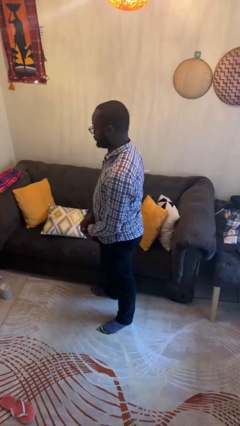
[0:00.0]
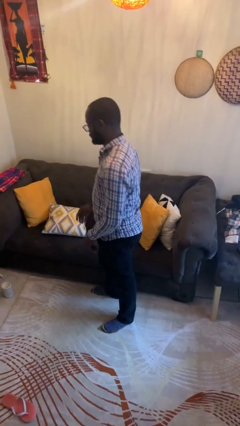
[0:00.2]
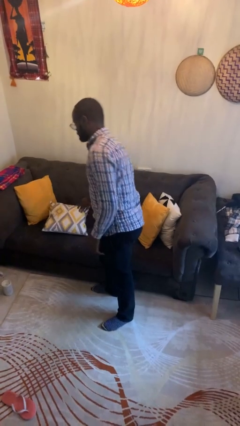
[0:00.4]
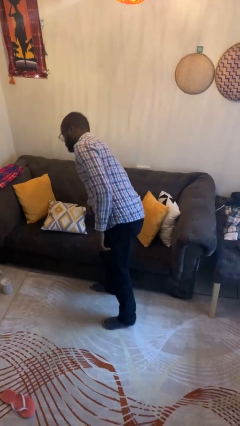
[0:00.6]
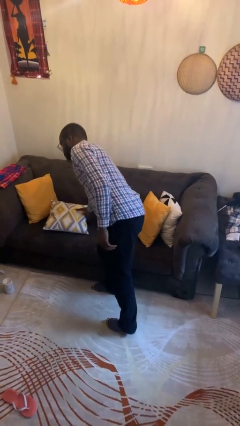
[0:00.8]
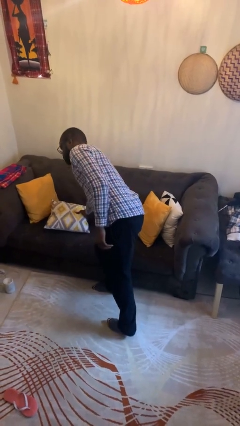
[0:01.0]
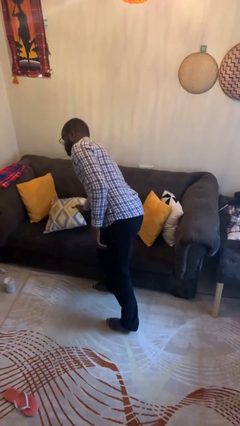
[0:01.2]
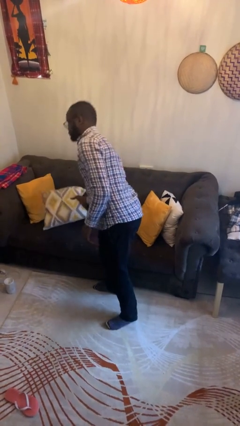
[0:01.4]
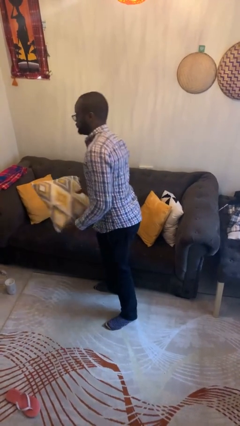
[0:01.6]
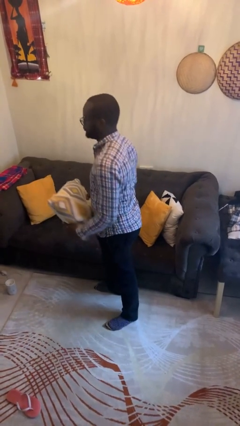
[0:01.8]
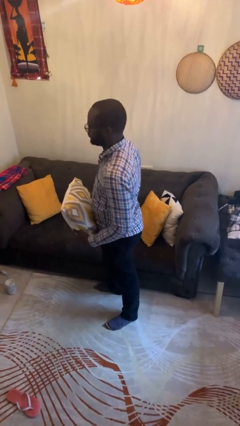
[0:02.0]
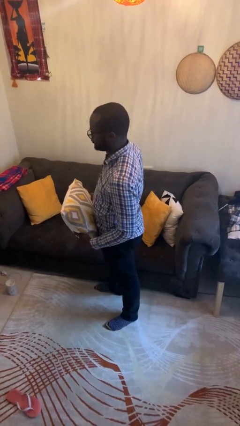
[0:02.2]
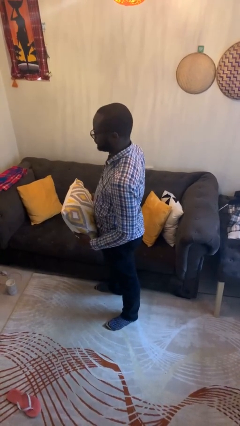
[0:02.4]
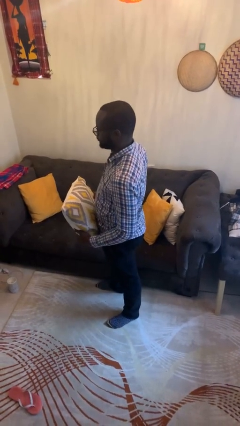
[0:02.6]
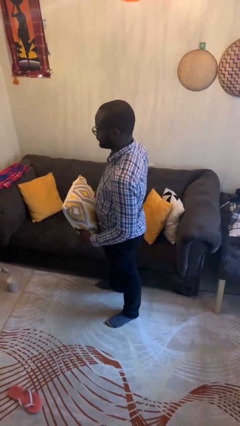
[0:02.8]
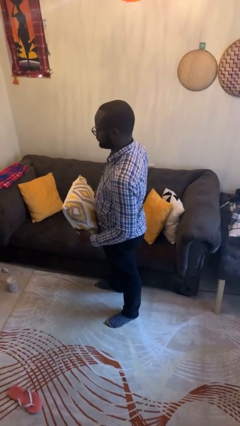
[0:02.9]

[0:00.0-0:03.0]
person picks up object from couch

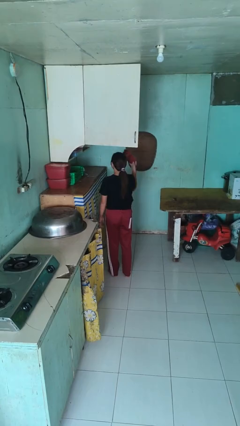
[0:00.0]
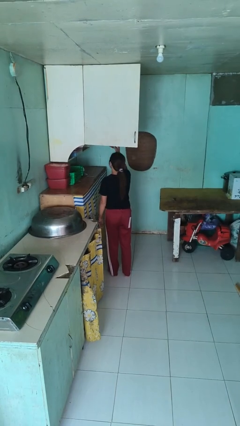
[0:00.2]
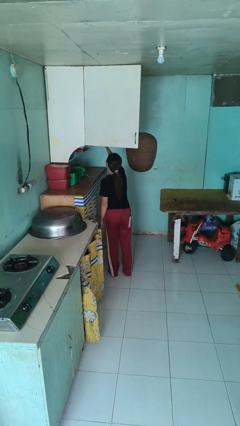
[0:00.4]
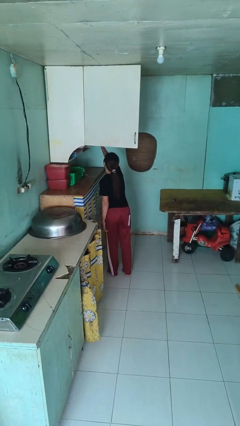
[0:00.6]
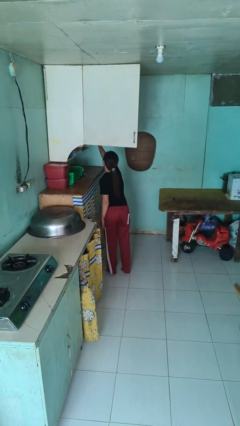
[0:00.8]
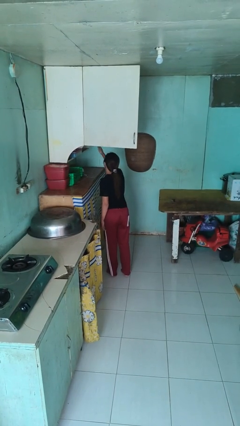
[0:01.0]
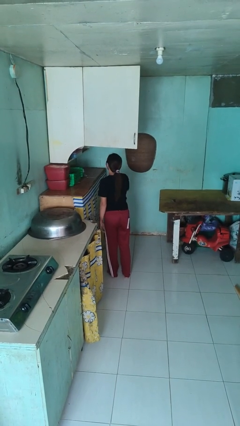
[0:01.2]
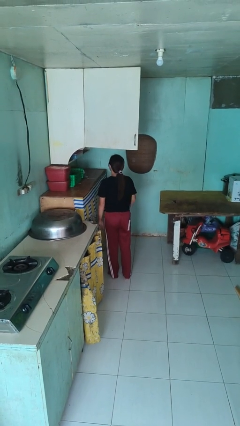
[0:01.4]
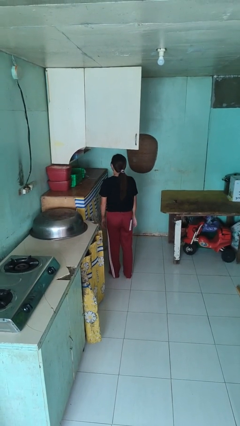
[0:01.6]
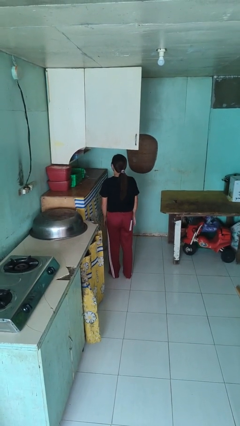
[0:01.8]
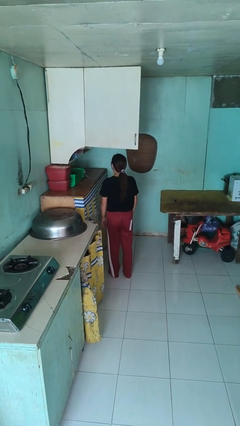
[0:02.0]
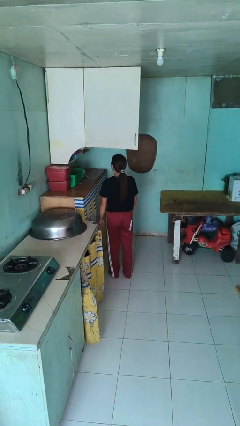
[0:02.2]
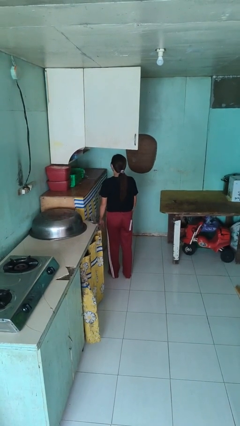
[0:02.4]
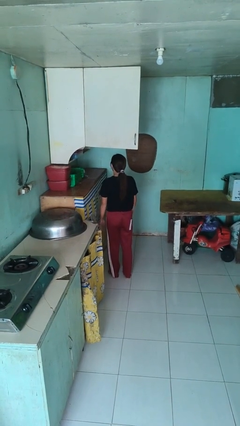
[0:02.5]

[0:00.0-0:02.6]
person puts object in cabinet

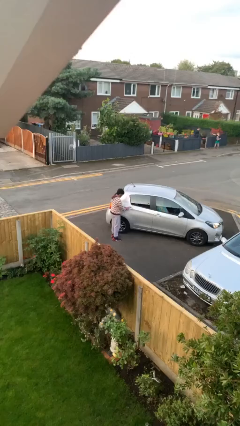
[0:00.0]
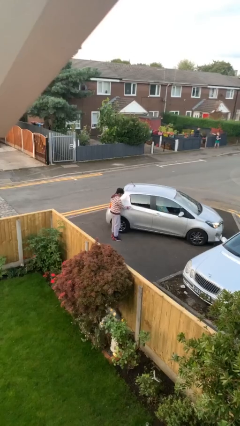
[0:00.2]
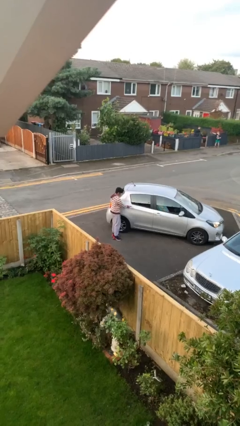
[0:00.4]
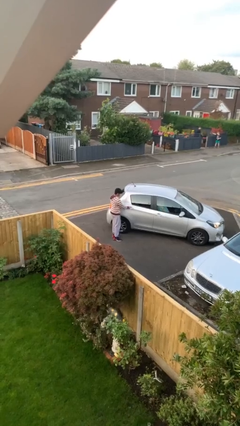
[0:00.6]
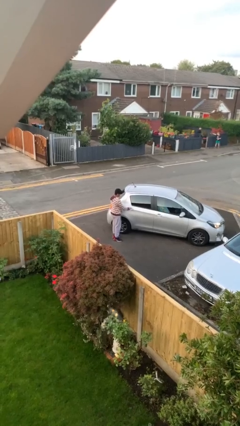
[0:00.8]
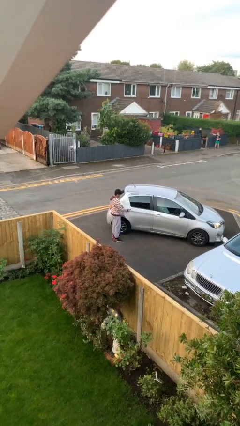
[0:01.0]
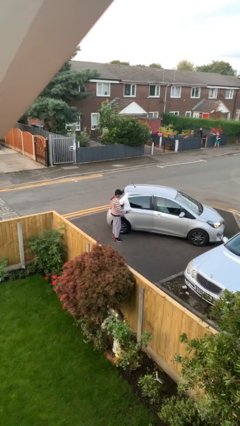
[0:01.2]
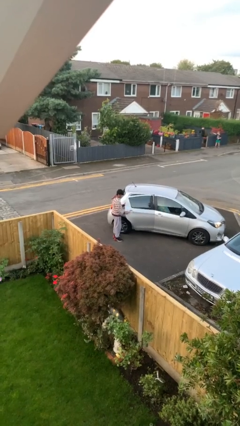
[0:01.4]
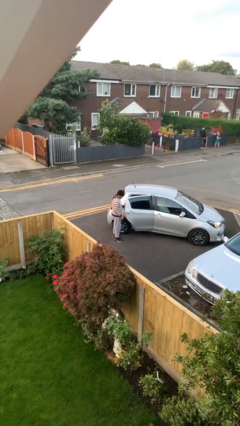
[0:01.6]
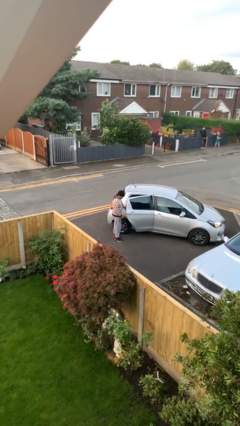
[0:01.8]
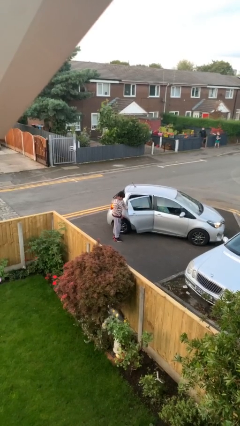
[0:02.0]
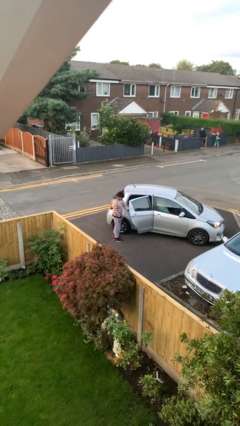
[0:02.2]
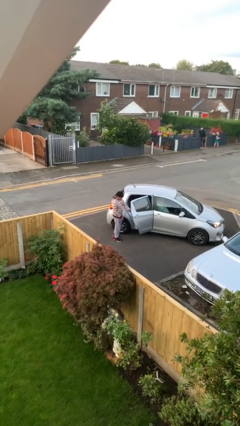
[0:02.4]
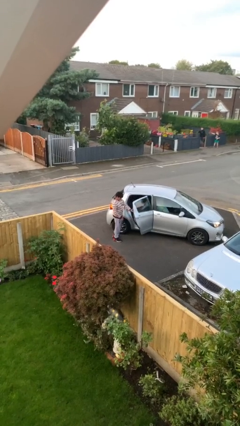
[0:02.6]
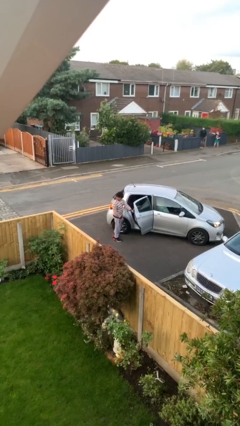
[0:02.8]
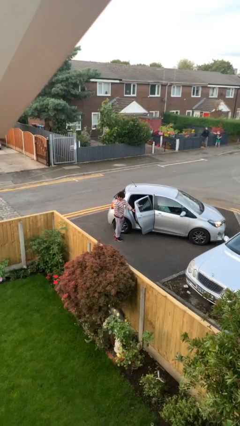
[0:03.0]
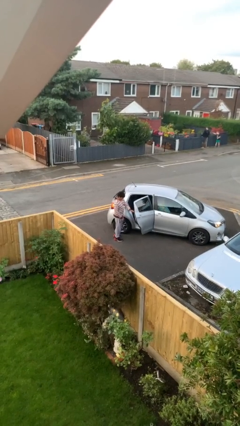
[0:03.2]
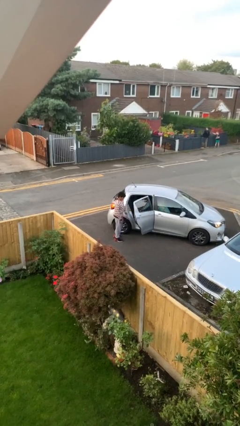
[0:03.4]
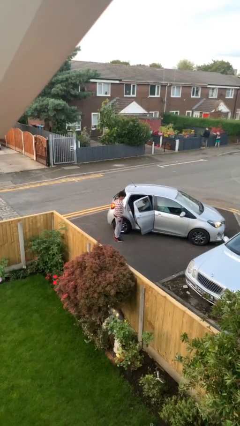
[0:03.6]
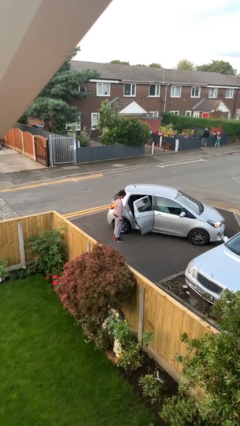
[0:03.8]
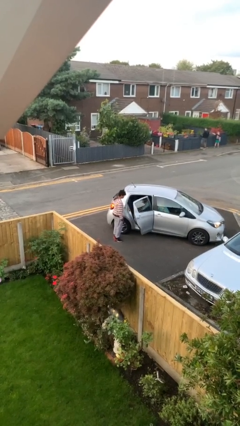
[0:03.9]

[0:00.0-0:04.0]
person opens car door

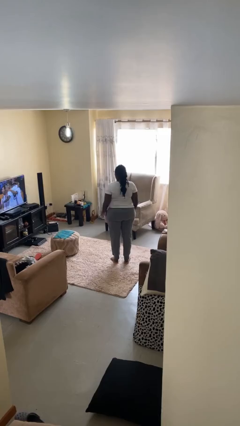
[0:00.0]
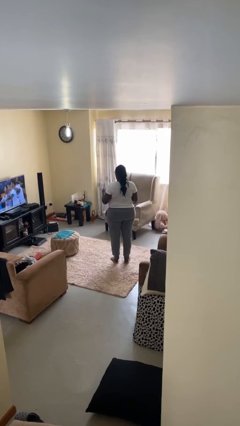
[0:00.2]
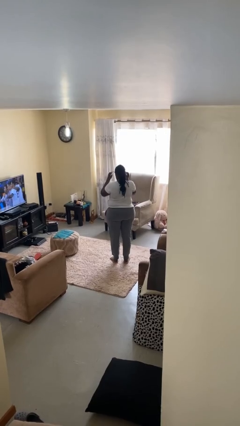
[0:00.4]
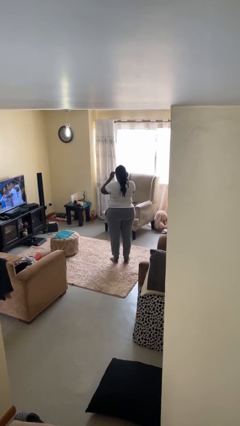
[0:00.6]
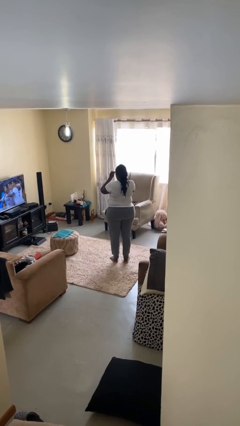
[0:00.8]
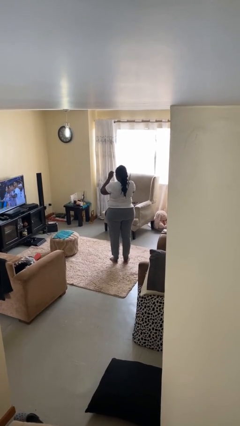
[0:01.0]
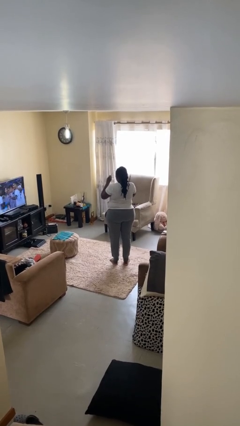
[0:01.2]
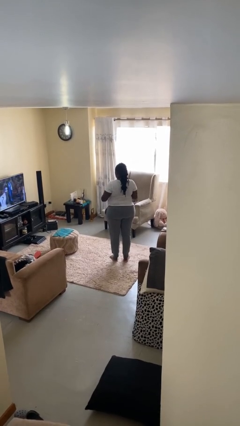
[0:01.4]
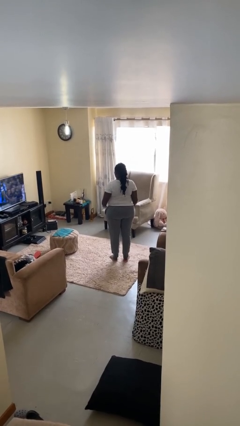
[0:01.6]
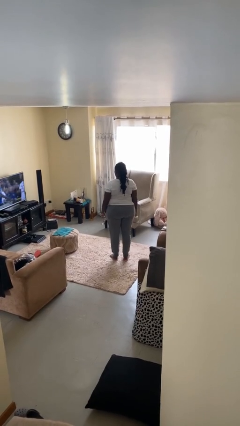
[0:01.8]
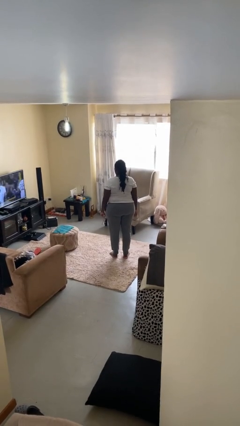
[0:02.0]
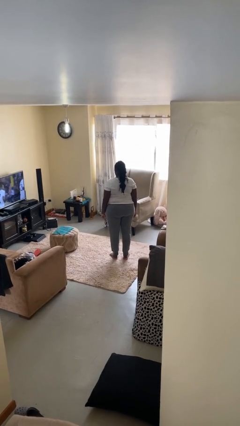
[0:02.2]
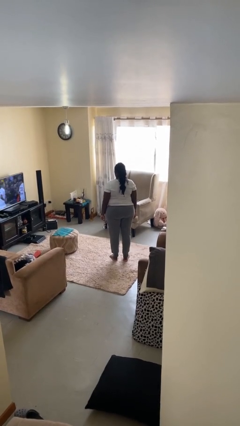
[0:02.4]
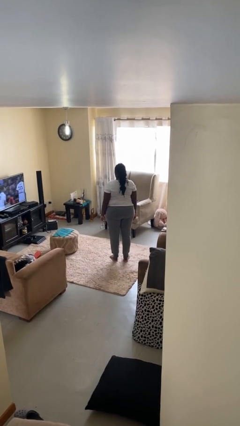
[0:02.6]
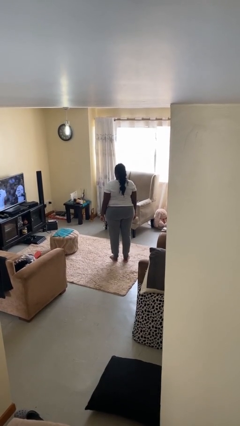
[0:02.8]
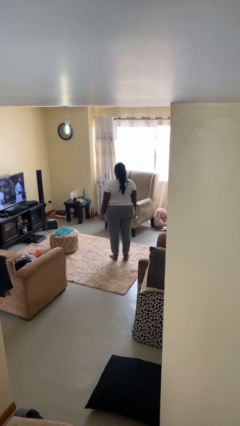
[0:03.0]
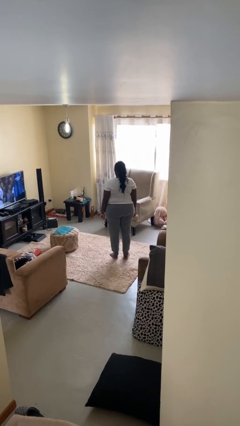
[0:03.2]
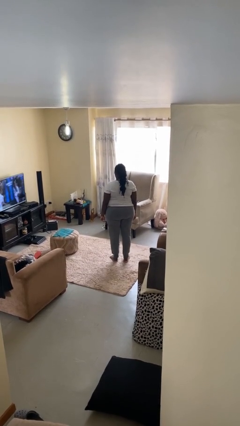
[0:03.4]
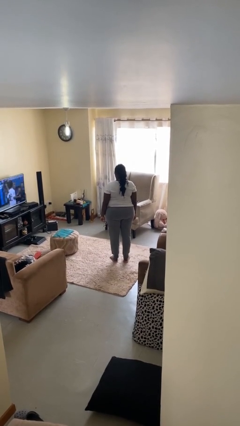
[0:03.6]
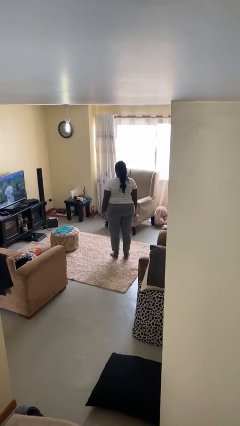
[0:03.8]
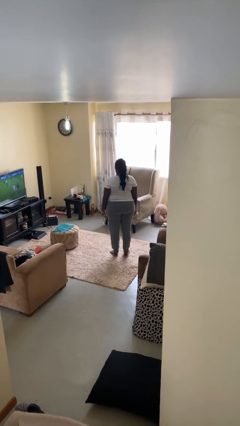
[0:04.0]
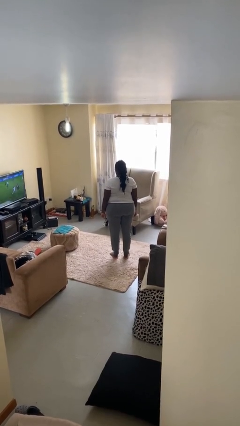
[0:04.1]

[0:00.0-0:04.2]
person takes off glasses

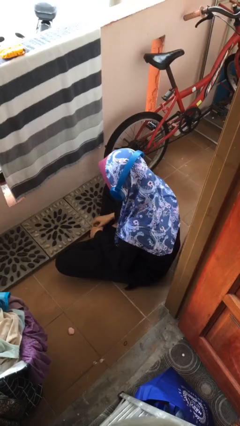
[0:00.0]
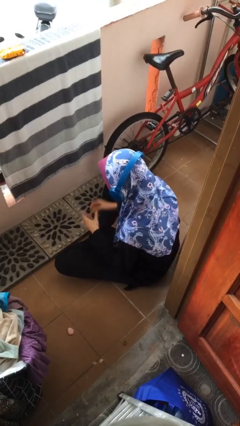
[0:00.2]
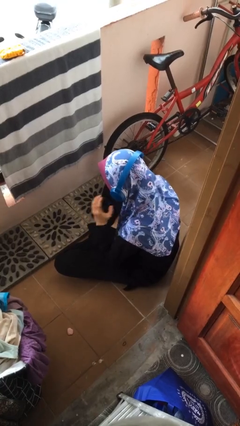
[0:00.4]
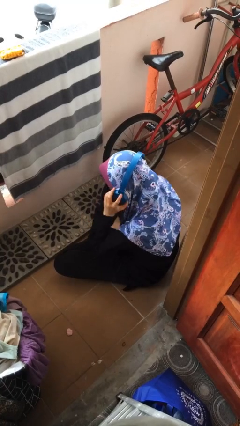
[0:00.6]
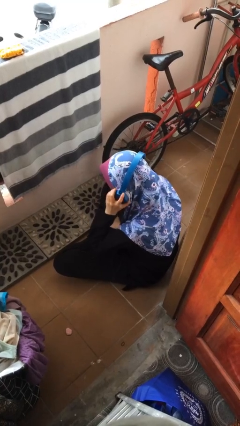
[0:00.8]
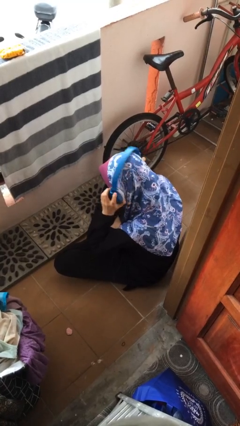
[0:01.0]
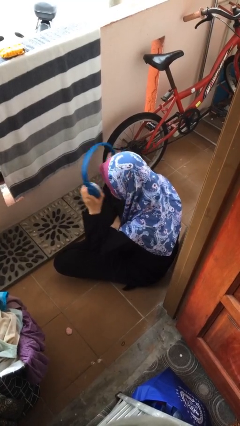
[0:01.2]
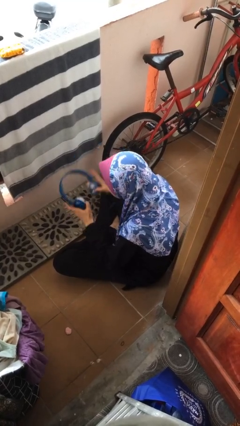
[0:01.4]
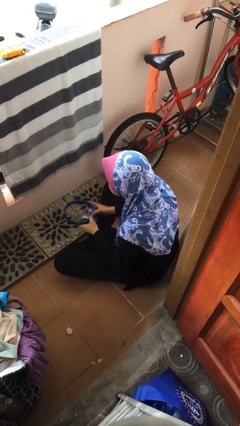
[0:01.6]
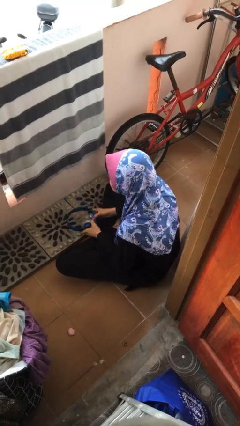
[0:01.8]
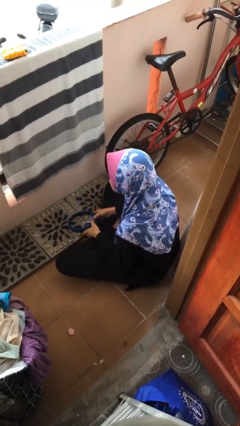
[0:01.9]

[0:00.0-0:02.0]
person takes off headphones

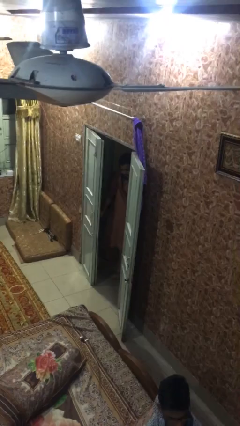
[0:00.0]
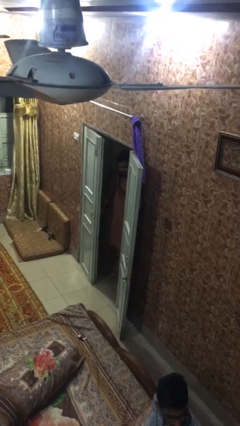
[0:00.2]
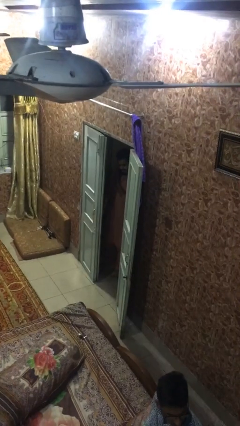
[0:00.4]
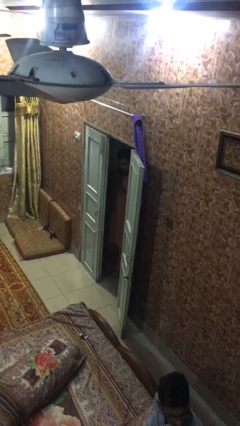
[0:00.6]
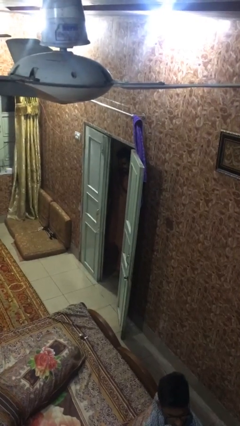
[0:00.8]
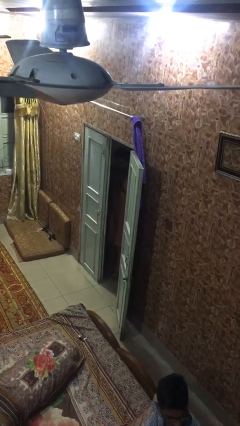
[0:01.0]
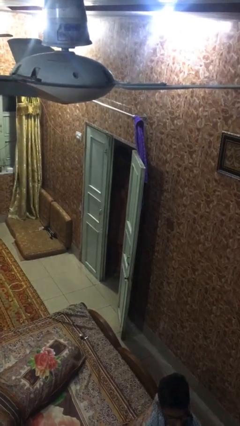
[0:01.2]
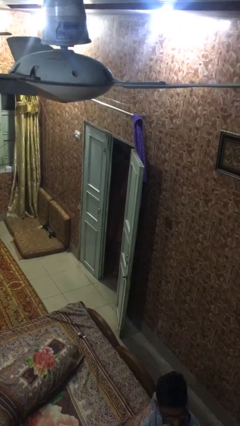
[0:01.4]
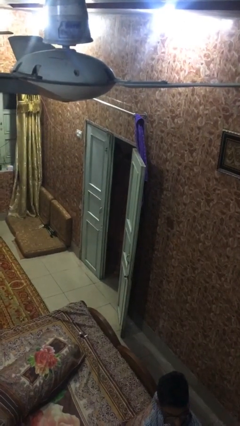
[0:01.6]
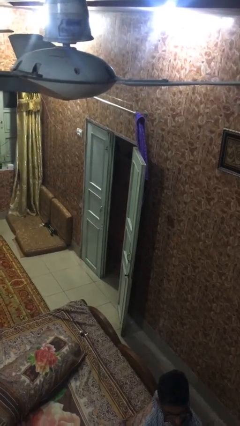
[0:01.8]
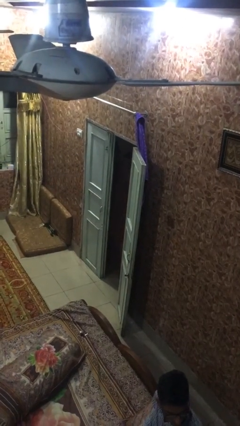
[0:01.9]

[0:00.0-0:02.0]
person closes facility door
